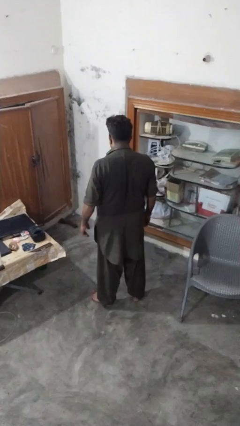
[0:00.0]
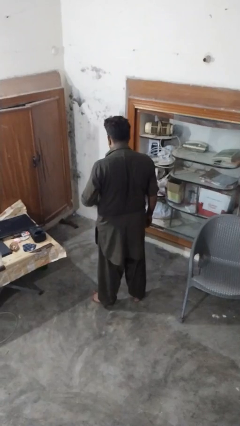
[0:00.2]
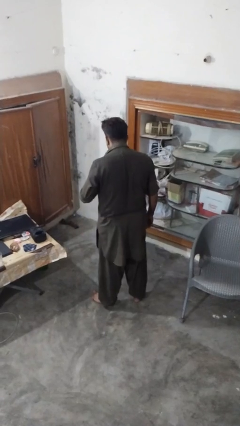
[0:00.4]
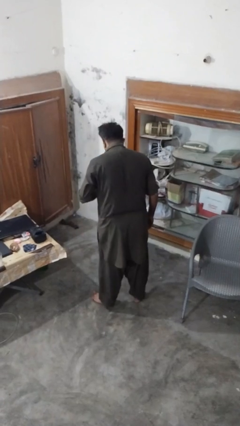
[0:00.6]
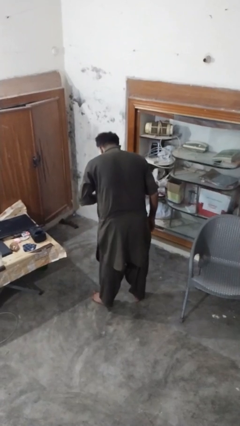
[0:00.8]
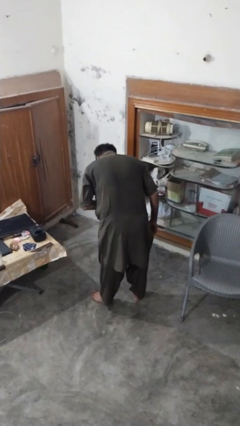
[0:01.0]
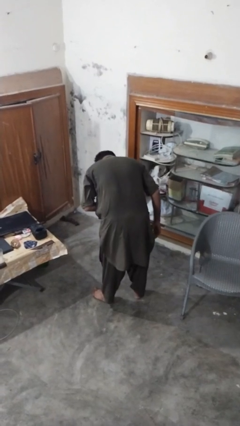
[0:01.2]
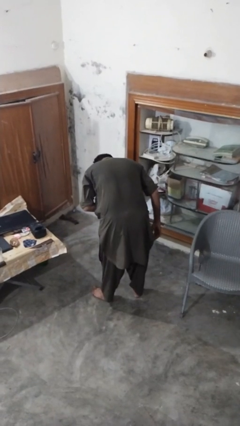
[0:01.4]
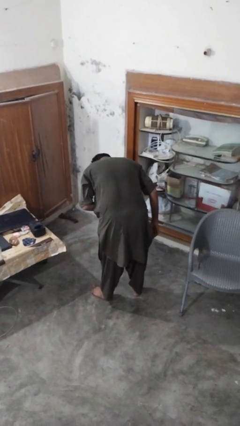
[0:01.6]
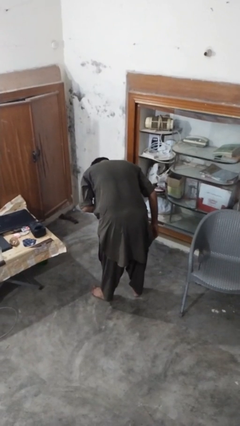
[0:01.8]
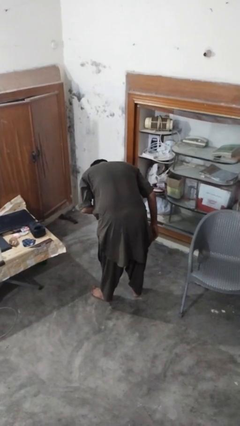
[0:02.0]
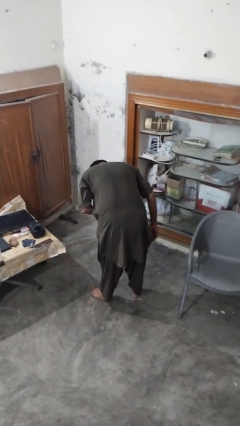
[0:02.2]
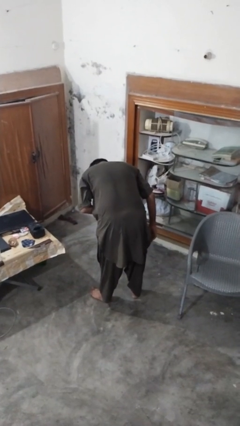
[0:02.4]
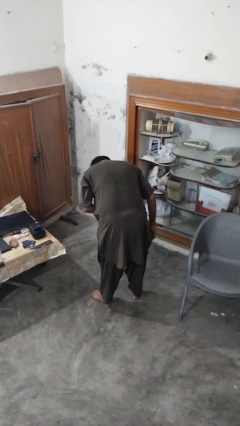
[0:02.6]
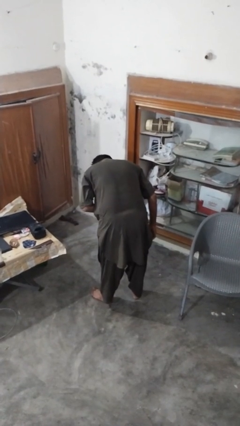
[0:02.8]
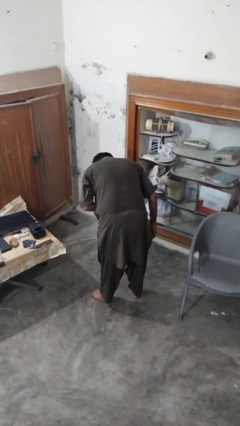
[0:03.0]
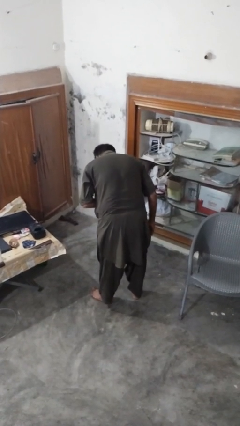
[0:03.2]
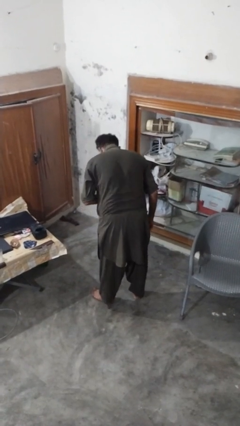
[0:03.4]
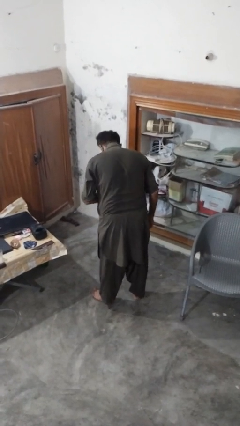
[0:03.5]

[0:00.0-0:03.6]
person bows

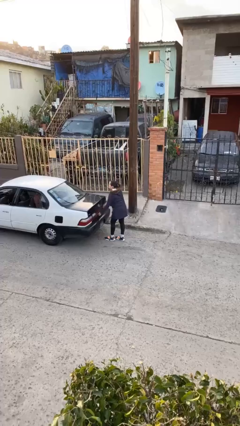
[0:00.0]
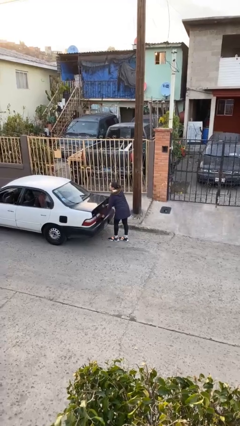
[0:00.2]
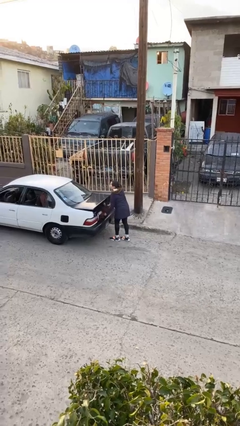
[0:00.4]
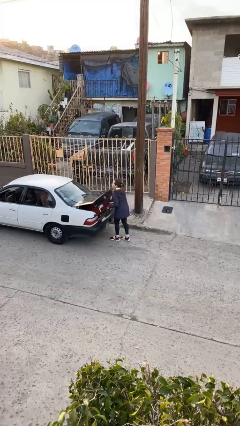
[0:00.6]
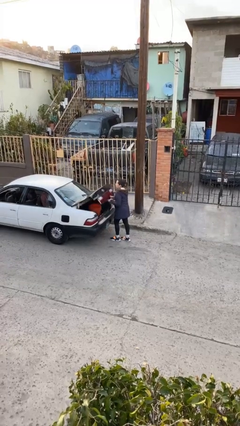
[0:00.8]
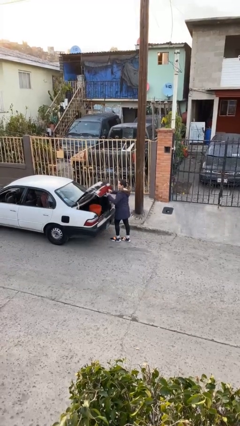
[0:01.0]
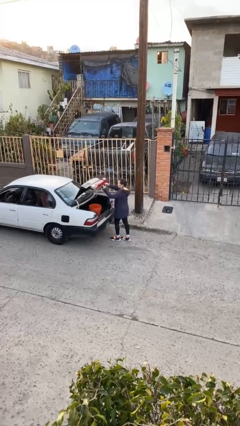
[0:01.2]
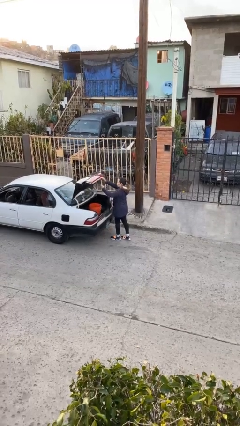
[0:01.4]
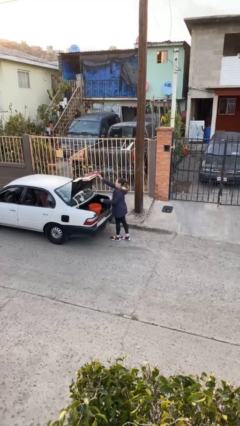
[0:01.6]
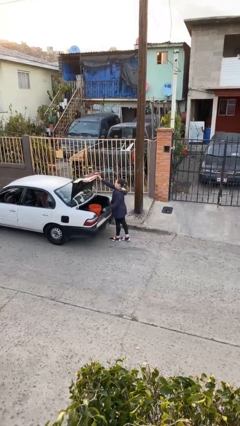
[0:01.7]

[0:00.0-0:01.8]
person opens car trunk

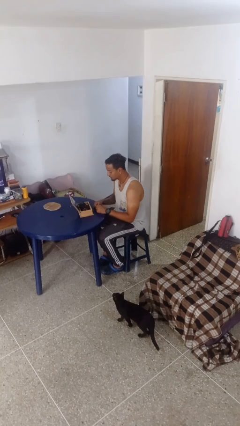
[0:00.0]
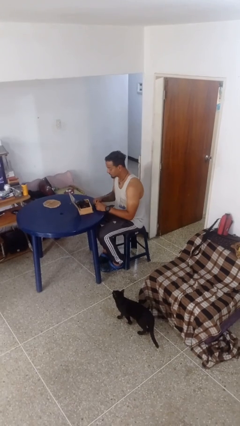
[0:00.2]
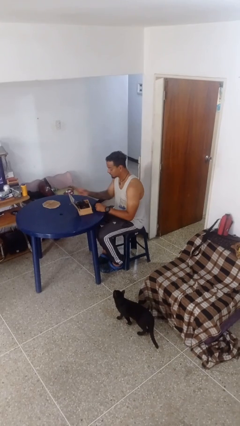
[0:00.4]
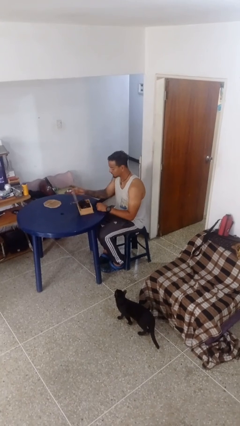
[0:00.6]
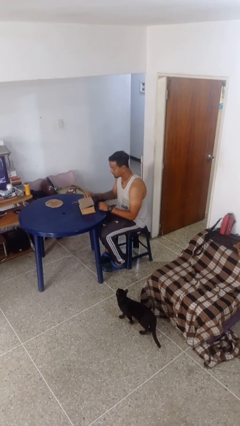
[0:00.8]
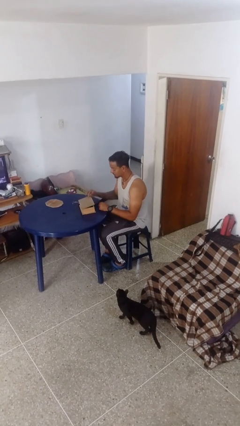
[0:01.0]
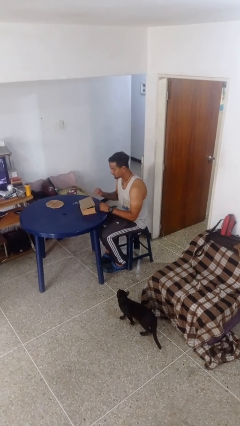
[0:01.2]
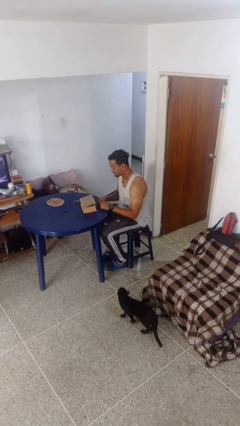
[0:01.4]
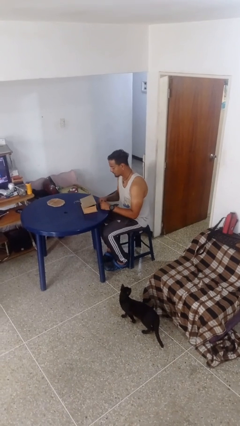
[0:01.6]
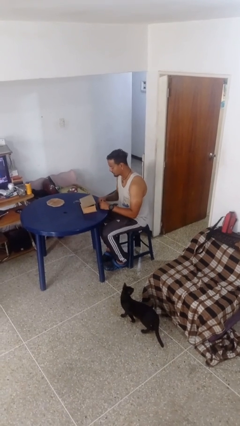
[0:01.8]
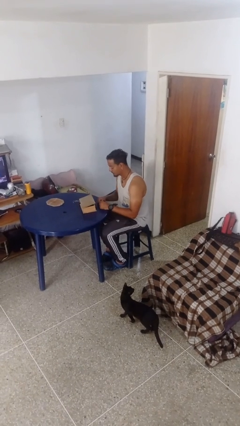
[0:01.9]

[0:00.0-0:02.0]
person closes jewelry box

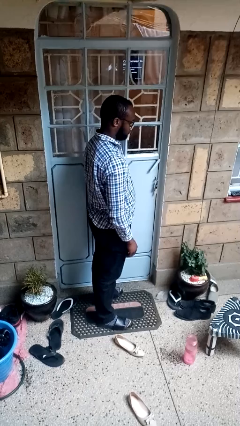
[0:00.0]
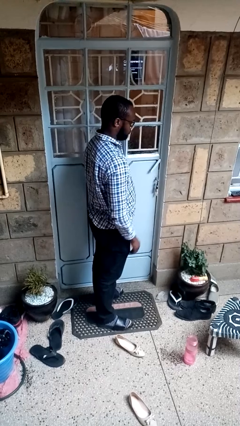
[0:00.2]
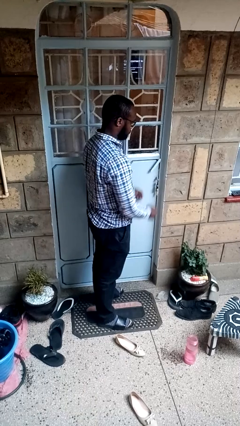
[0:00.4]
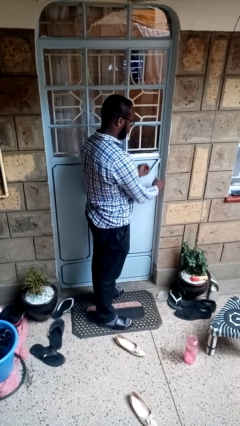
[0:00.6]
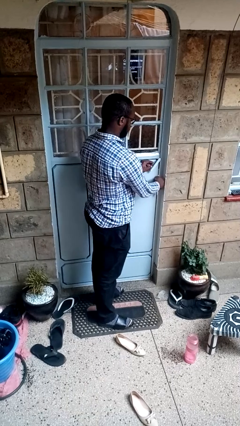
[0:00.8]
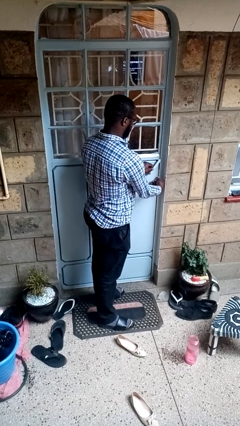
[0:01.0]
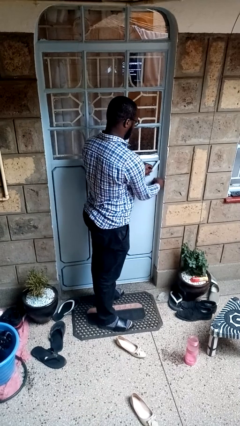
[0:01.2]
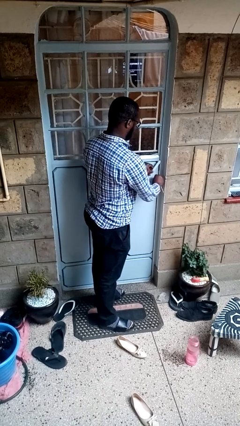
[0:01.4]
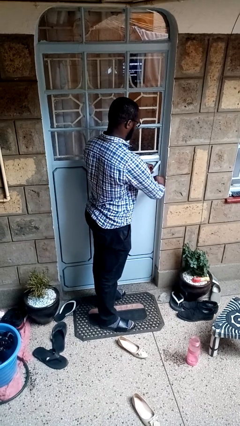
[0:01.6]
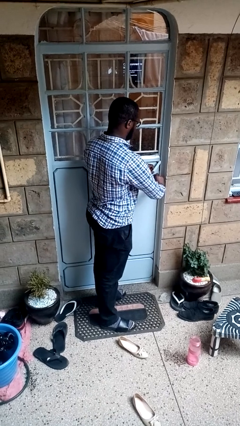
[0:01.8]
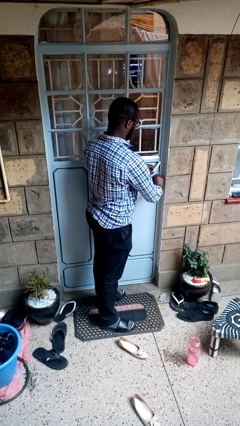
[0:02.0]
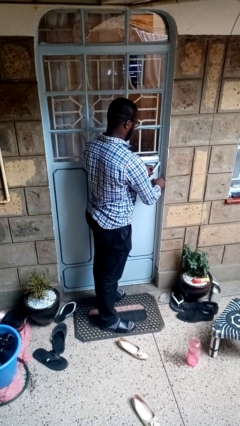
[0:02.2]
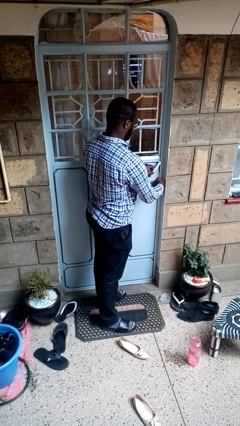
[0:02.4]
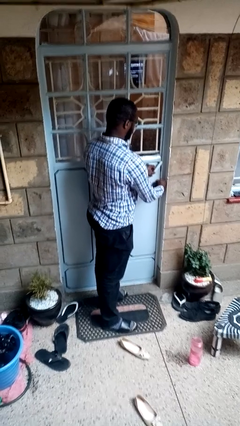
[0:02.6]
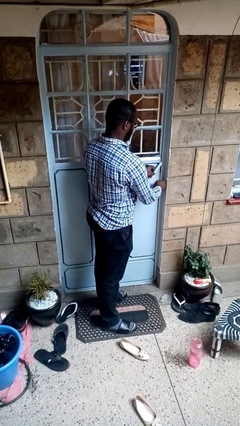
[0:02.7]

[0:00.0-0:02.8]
person unlocks door with keys

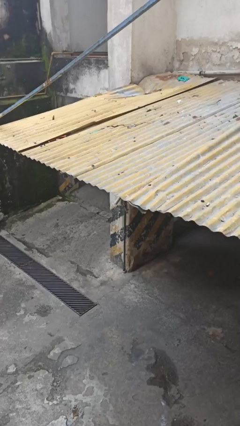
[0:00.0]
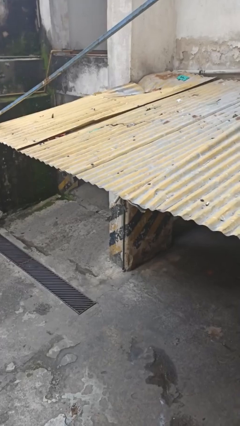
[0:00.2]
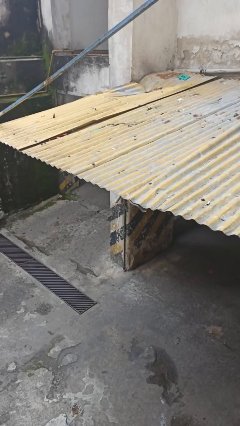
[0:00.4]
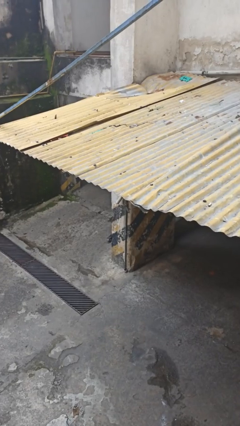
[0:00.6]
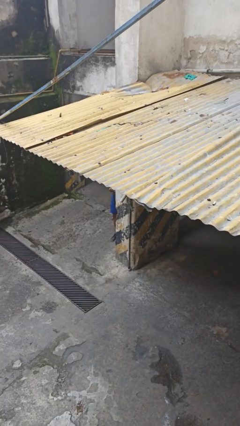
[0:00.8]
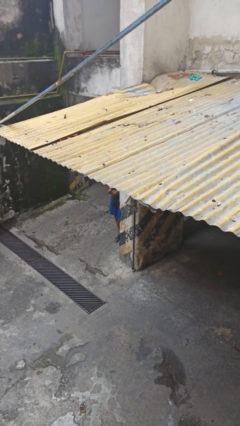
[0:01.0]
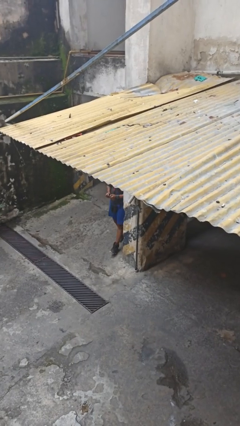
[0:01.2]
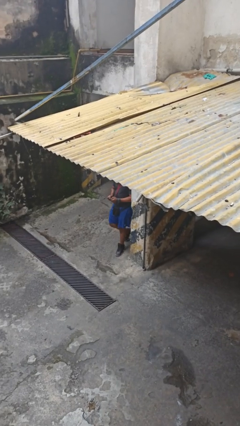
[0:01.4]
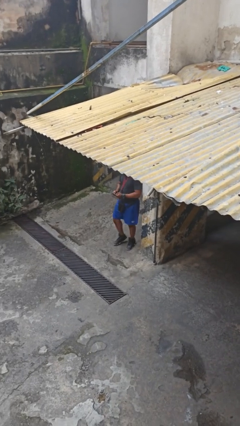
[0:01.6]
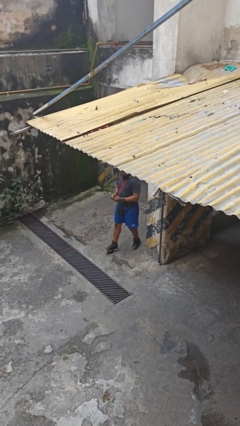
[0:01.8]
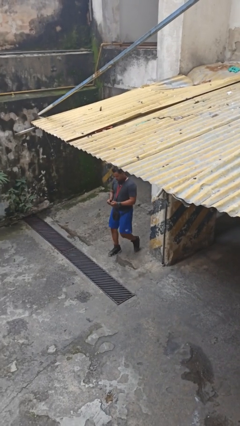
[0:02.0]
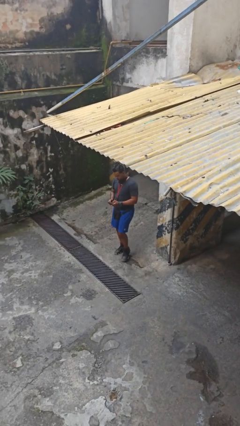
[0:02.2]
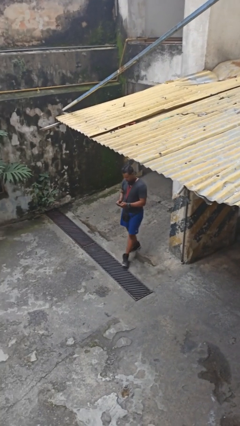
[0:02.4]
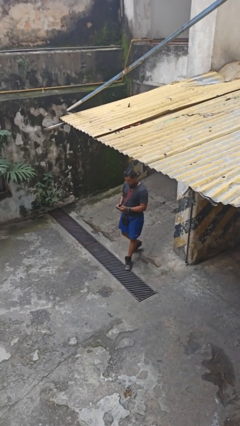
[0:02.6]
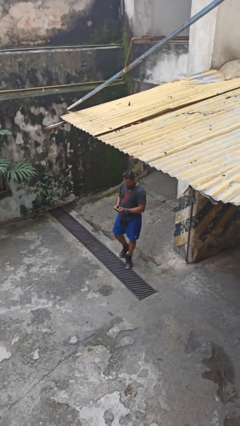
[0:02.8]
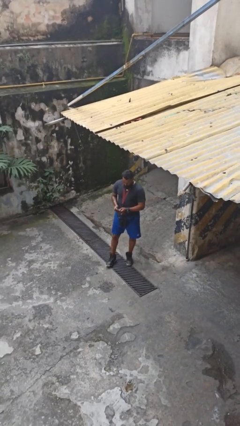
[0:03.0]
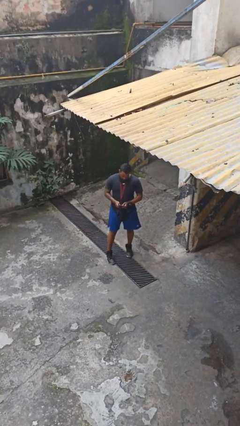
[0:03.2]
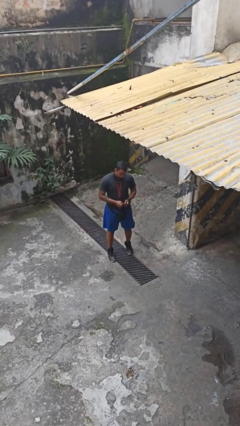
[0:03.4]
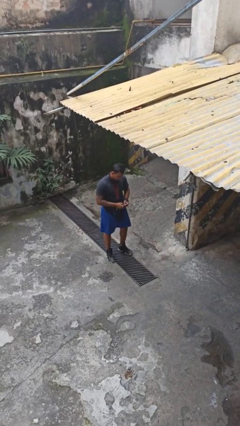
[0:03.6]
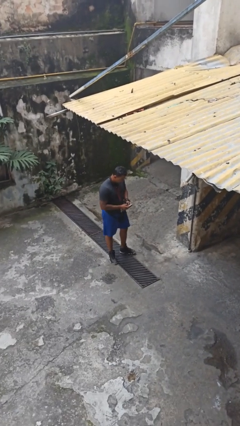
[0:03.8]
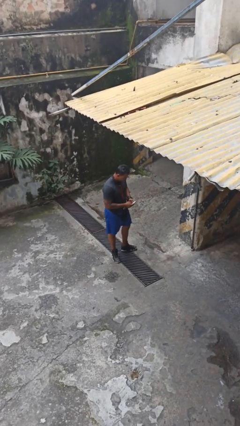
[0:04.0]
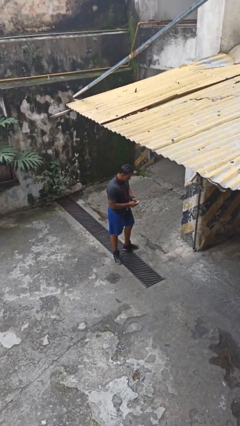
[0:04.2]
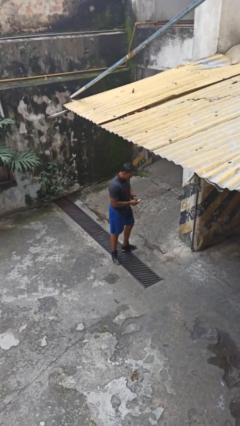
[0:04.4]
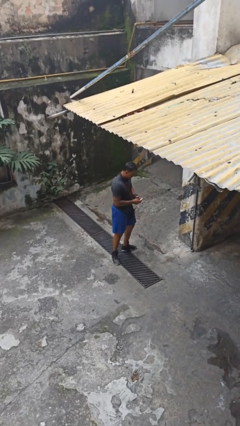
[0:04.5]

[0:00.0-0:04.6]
person enters scene through structure

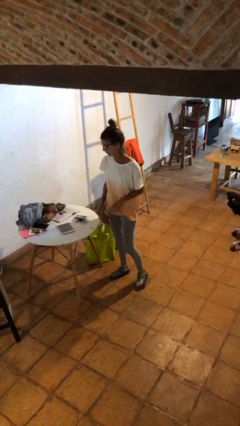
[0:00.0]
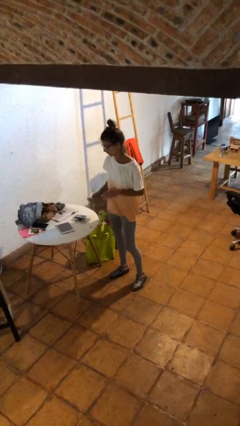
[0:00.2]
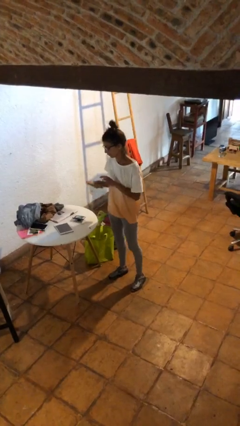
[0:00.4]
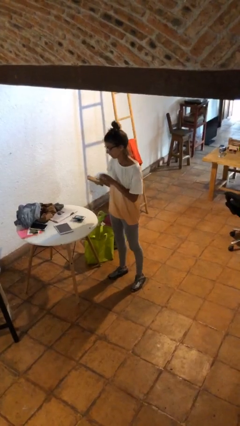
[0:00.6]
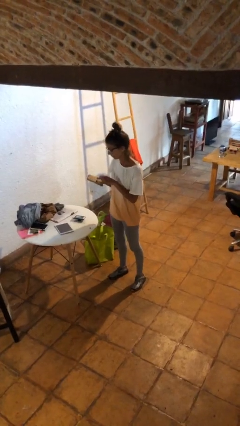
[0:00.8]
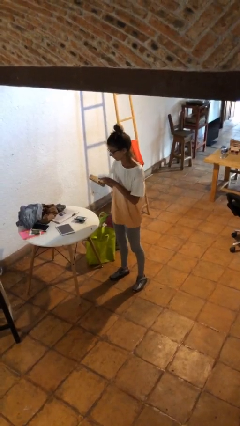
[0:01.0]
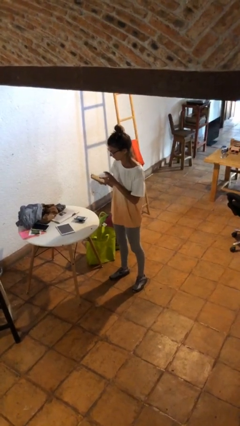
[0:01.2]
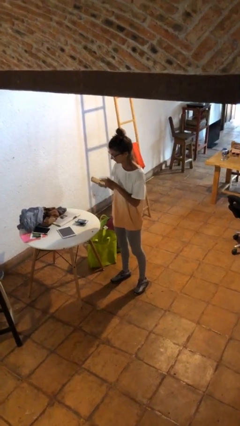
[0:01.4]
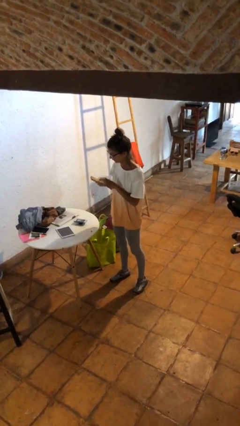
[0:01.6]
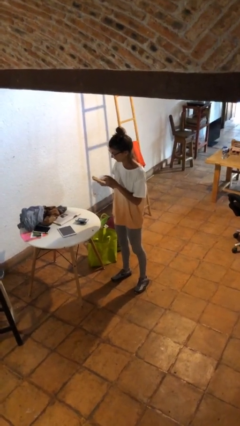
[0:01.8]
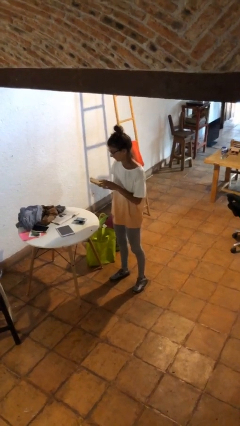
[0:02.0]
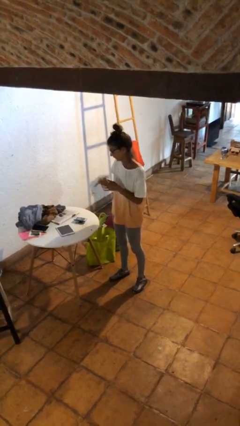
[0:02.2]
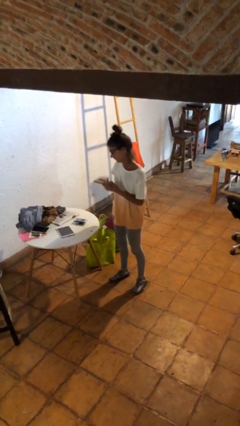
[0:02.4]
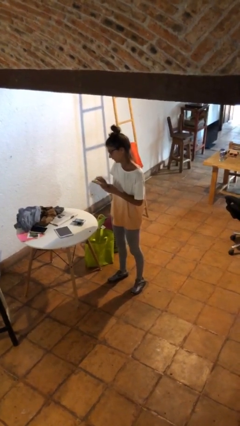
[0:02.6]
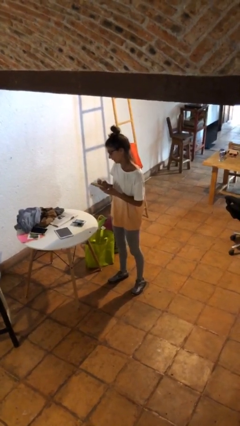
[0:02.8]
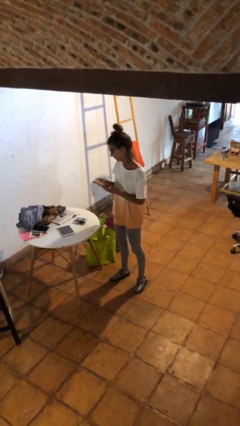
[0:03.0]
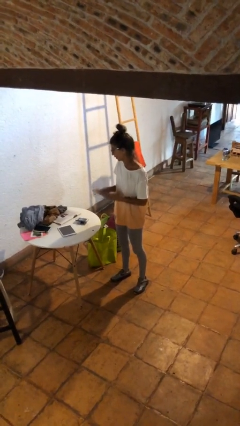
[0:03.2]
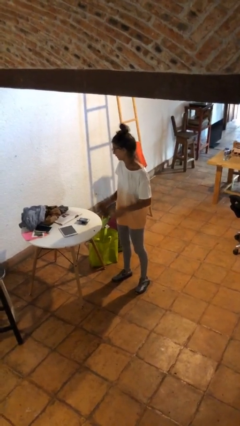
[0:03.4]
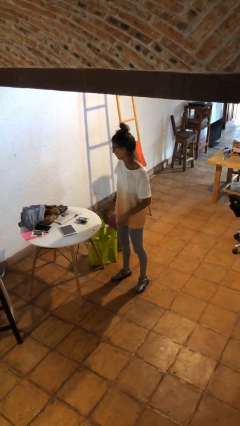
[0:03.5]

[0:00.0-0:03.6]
person taps object with finger
